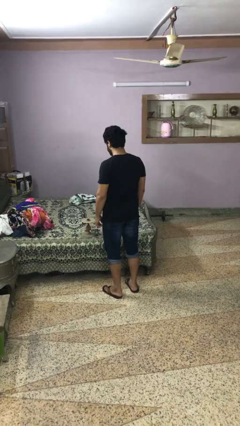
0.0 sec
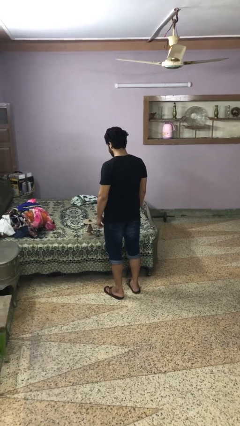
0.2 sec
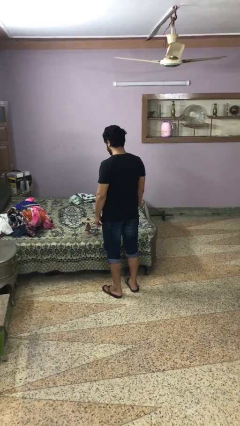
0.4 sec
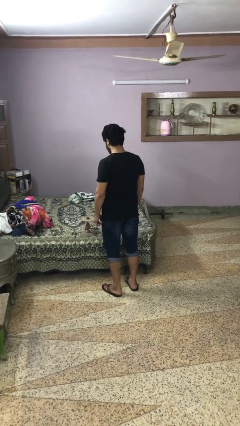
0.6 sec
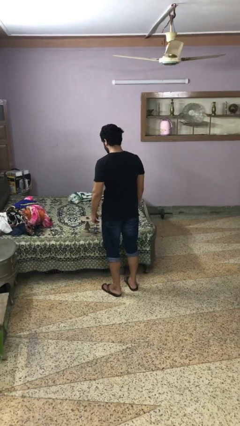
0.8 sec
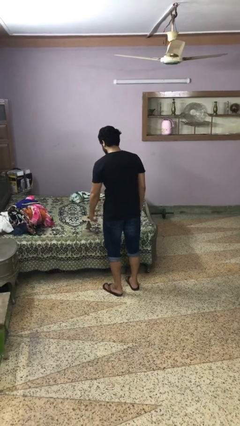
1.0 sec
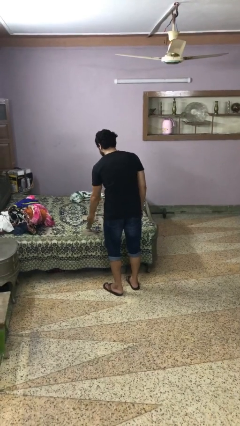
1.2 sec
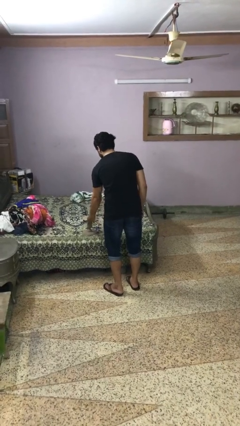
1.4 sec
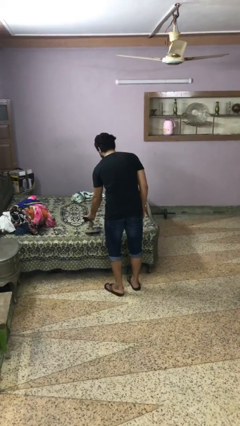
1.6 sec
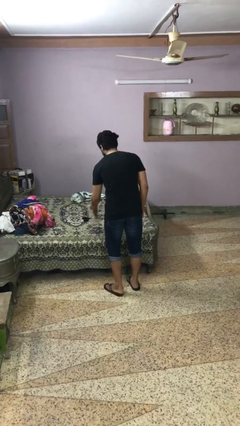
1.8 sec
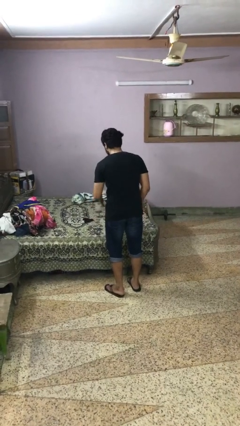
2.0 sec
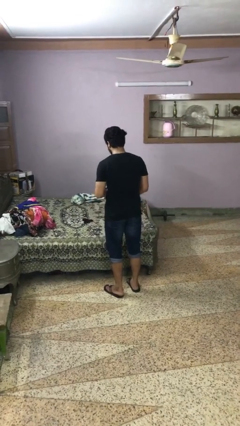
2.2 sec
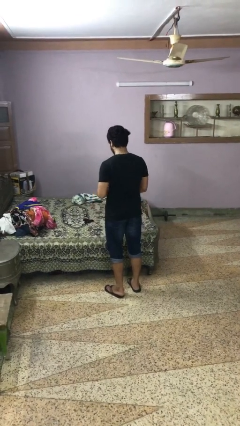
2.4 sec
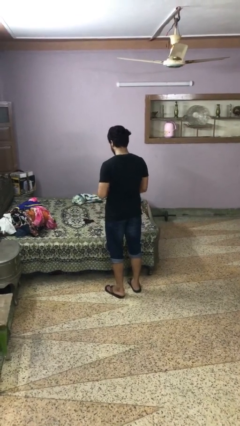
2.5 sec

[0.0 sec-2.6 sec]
person picks up object from bed

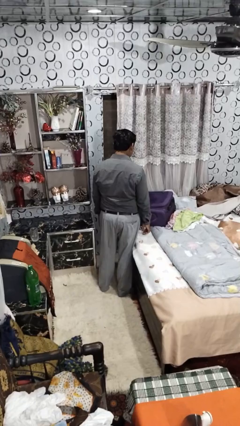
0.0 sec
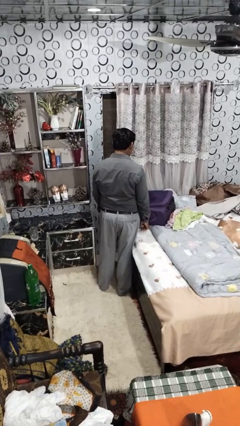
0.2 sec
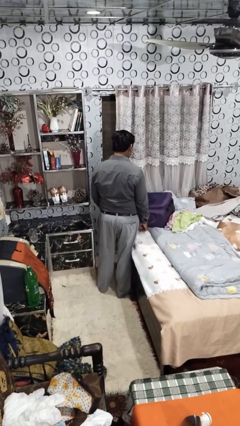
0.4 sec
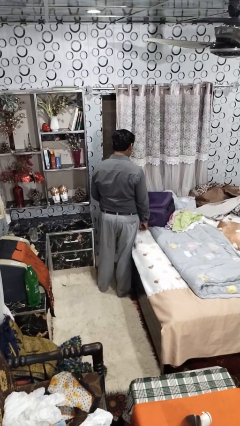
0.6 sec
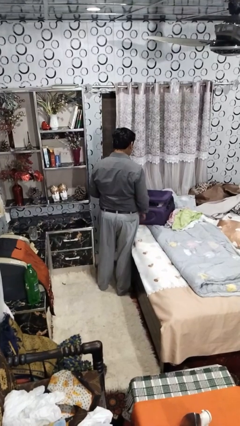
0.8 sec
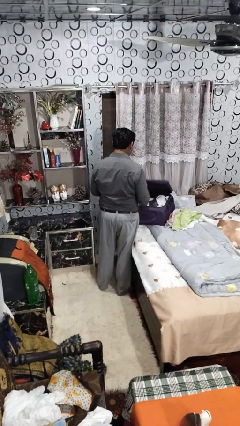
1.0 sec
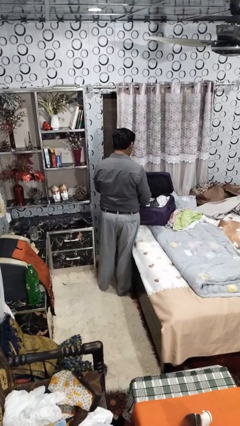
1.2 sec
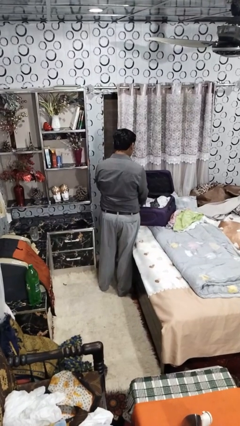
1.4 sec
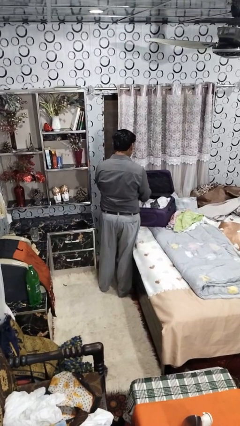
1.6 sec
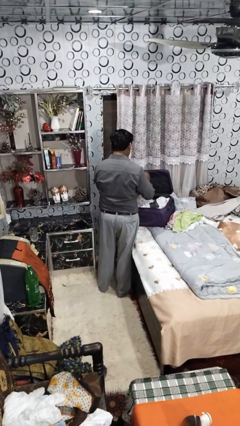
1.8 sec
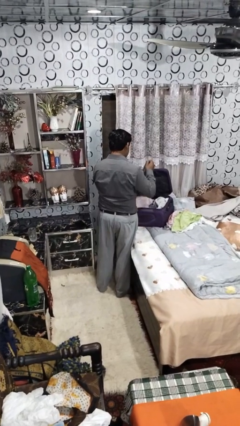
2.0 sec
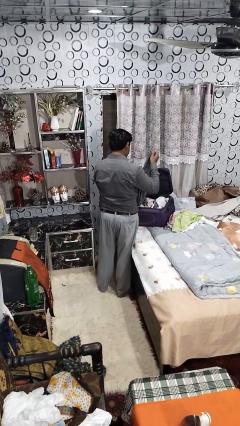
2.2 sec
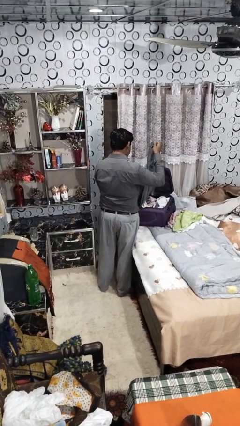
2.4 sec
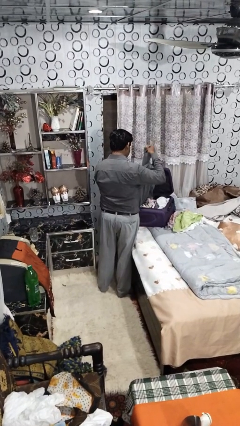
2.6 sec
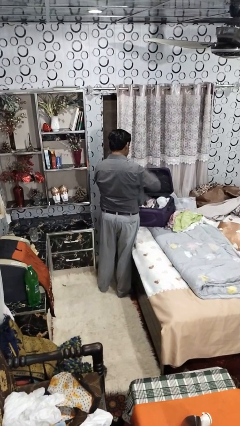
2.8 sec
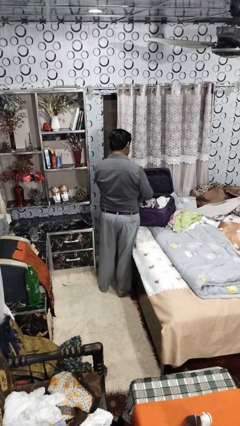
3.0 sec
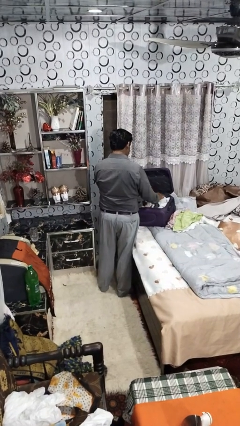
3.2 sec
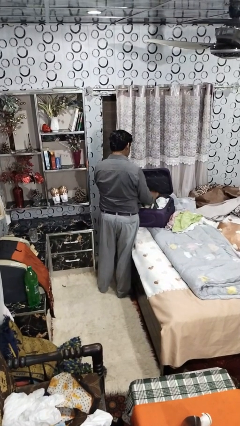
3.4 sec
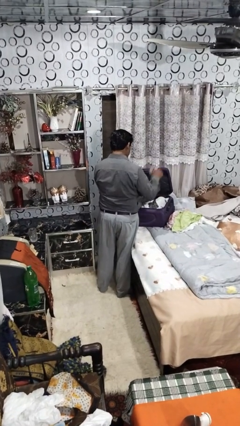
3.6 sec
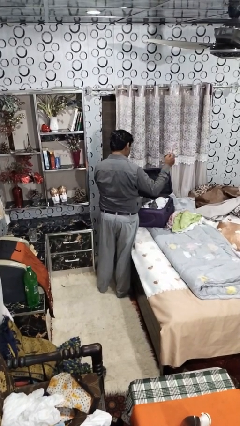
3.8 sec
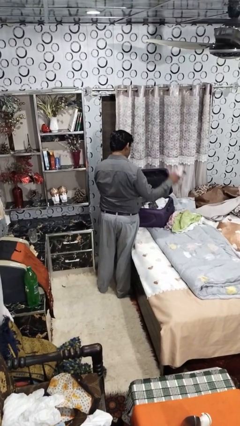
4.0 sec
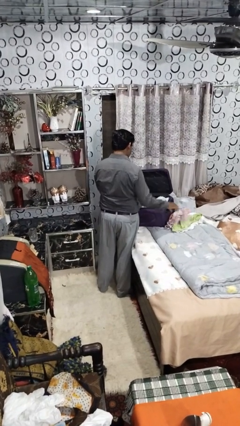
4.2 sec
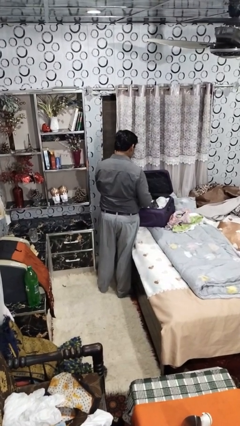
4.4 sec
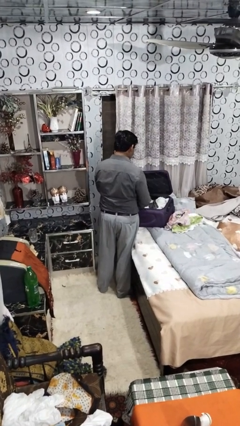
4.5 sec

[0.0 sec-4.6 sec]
person unloads clothes from suitcase

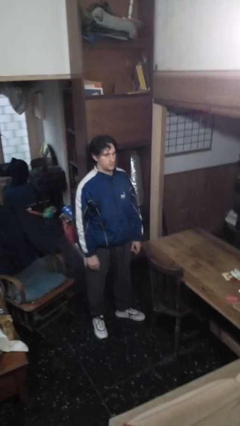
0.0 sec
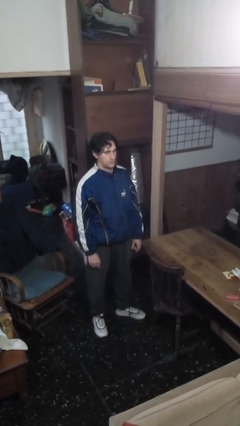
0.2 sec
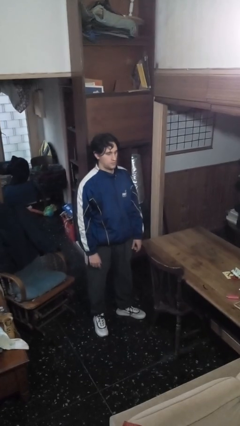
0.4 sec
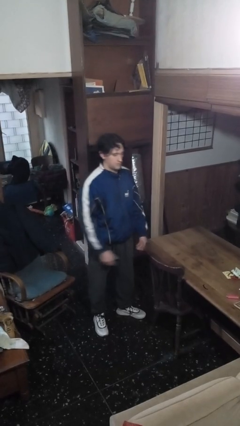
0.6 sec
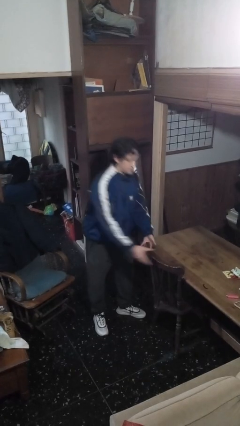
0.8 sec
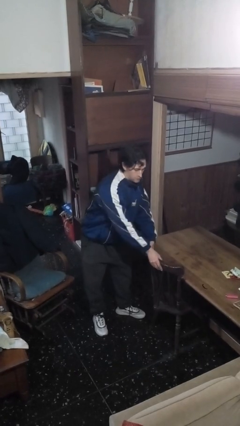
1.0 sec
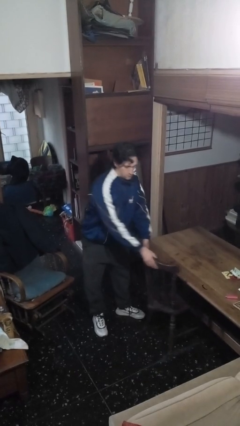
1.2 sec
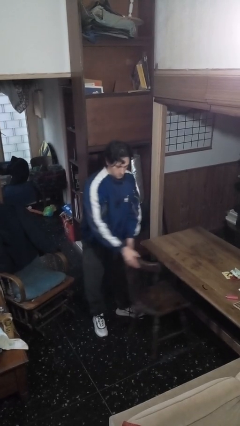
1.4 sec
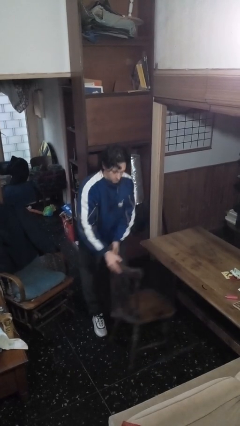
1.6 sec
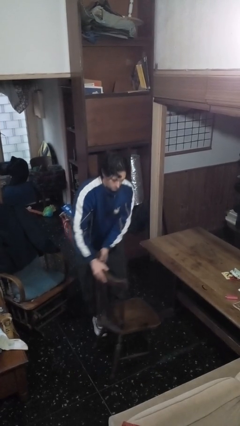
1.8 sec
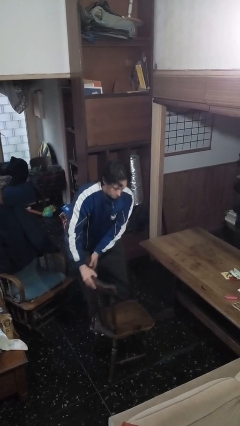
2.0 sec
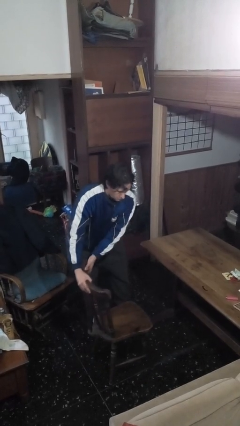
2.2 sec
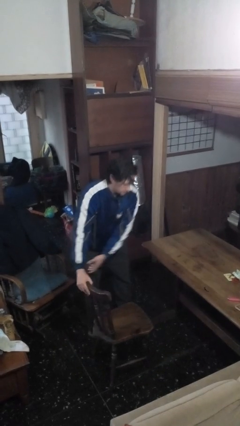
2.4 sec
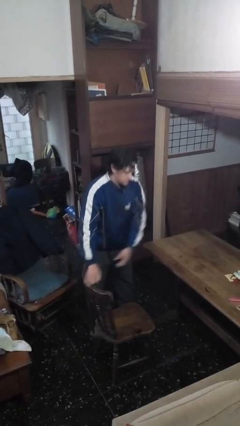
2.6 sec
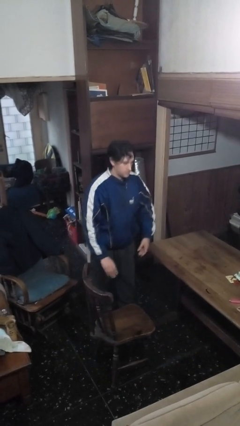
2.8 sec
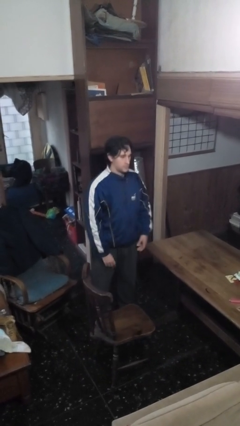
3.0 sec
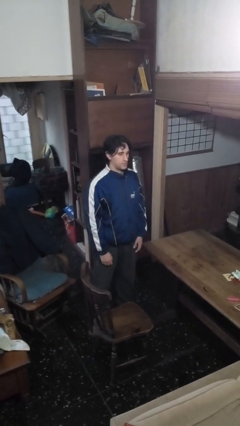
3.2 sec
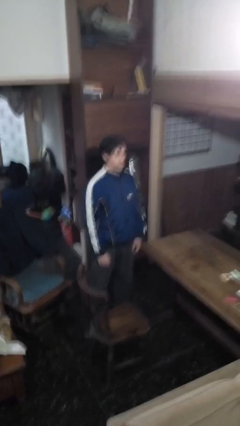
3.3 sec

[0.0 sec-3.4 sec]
person pulls out chair

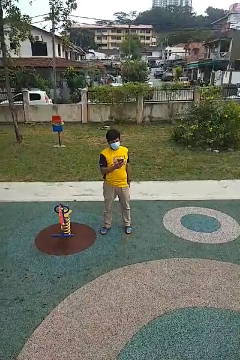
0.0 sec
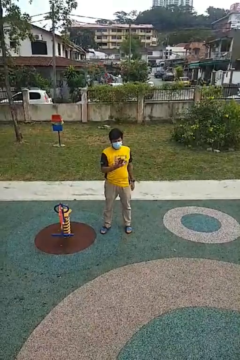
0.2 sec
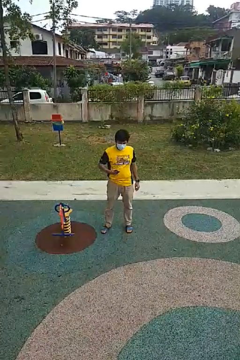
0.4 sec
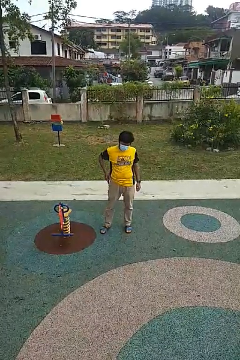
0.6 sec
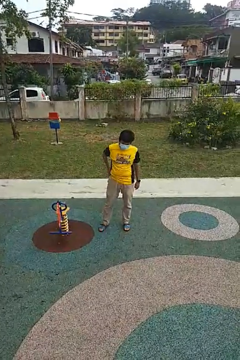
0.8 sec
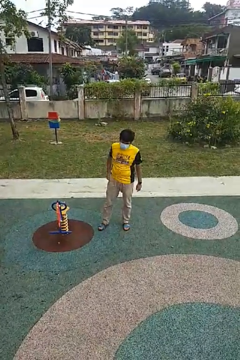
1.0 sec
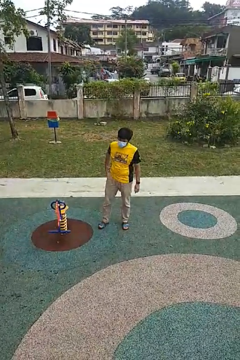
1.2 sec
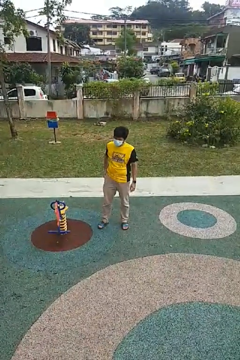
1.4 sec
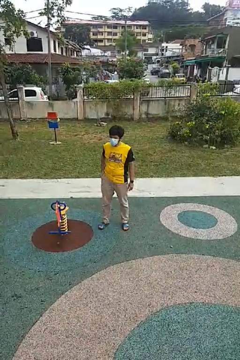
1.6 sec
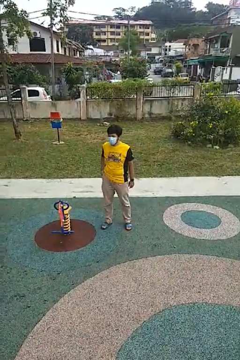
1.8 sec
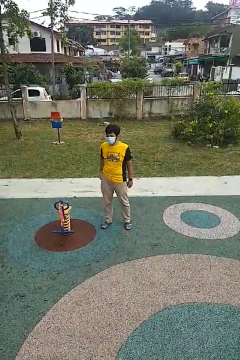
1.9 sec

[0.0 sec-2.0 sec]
person puts phone into pocket

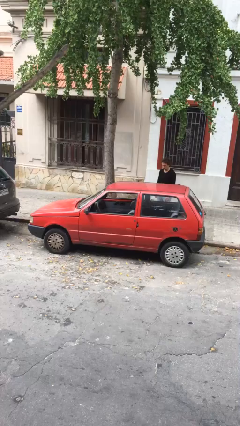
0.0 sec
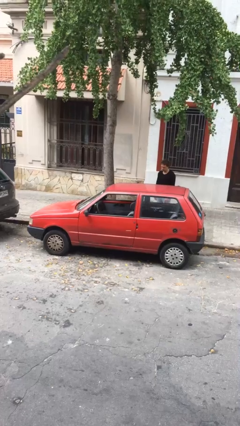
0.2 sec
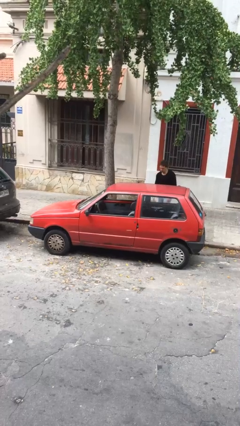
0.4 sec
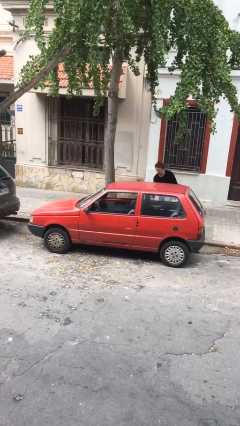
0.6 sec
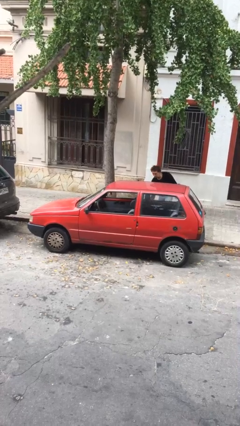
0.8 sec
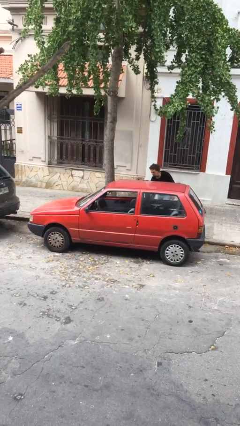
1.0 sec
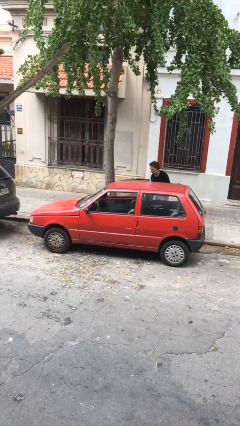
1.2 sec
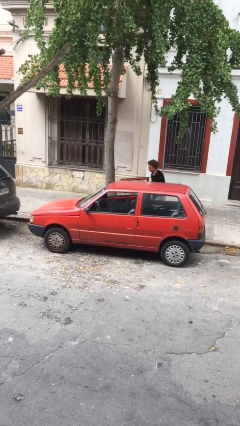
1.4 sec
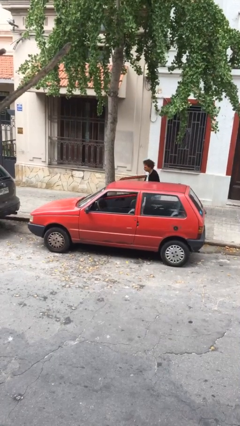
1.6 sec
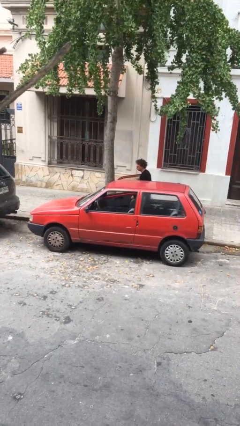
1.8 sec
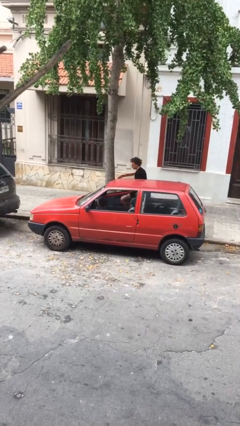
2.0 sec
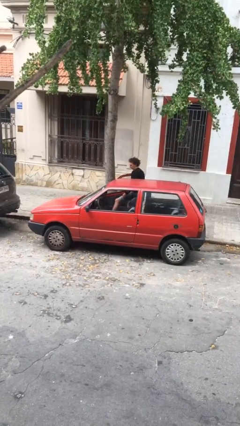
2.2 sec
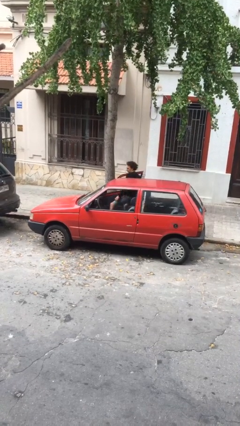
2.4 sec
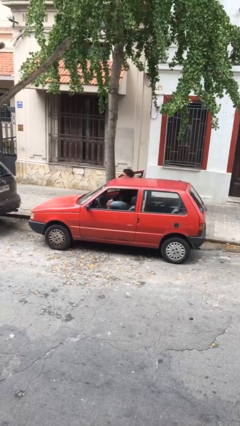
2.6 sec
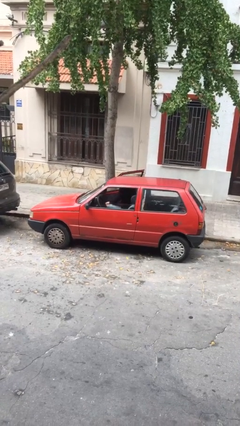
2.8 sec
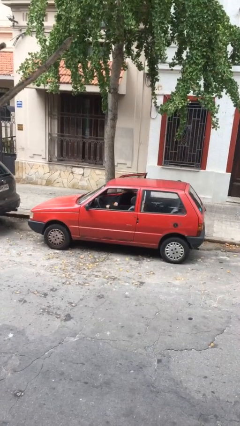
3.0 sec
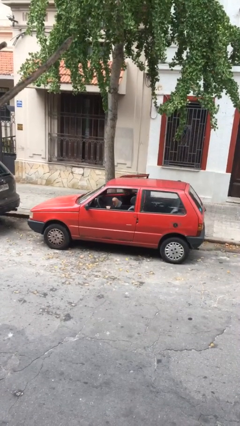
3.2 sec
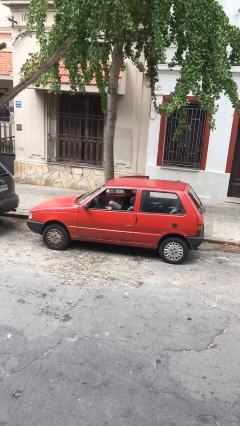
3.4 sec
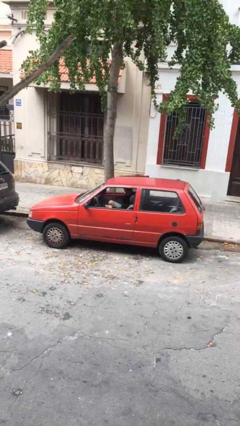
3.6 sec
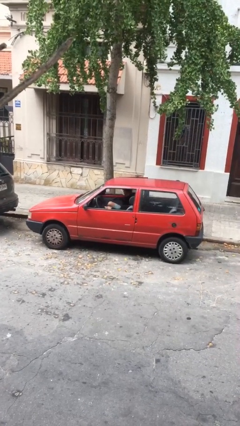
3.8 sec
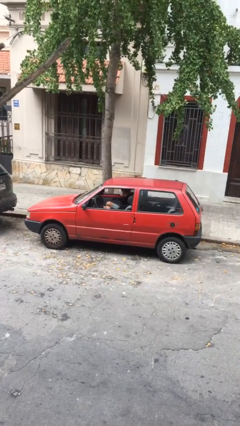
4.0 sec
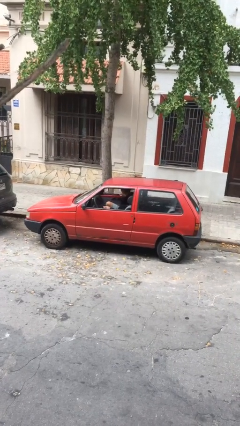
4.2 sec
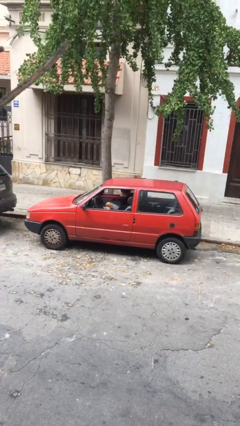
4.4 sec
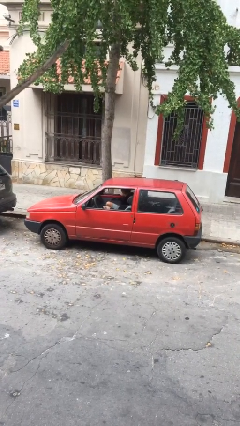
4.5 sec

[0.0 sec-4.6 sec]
car picks up person

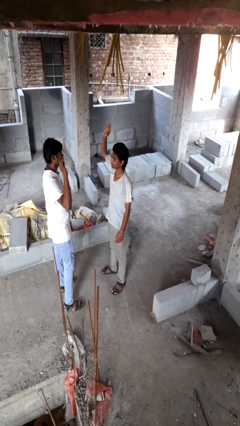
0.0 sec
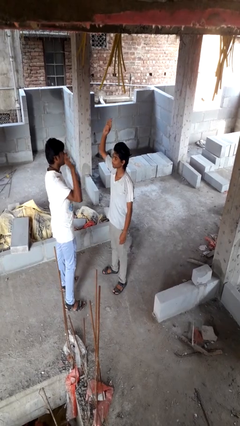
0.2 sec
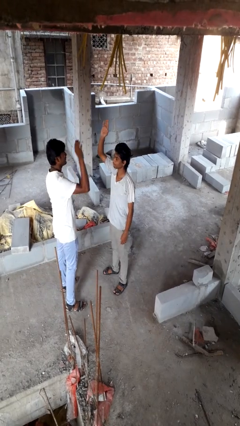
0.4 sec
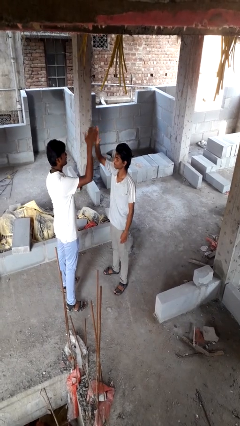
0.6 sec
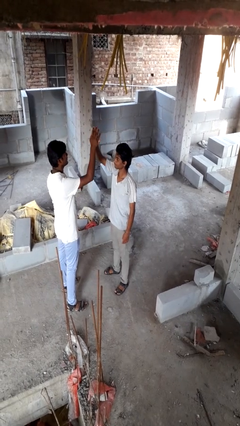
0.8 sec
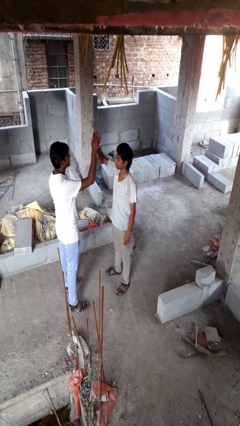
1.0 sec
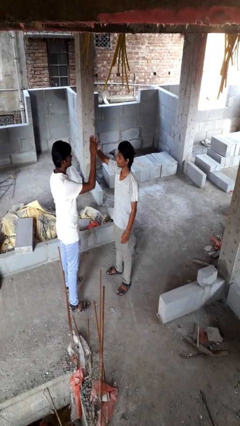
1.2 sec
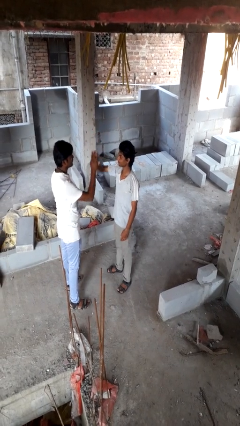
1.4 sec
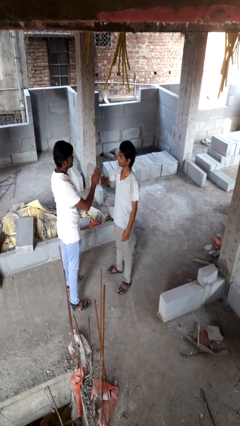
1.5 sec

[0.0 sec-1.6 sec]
person highfives hand
